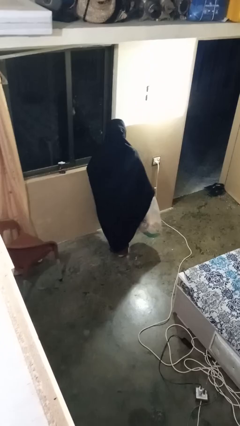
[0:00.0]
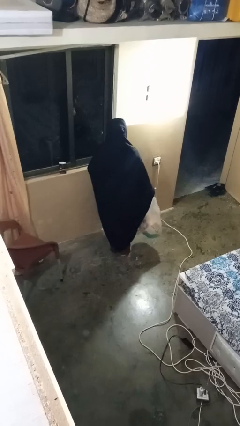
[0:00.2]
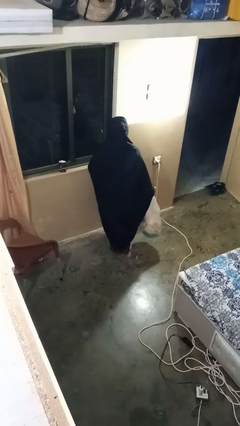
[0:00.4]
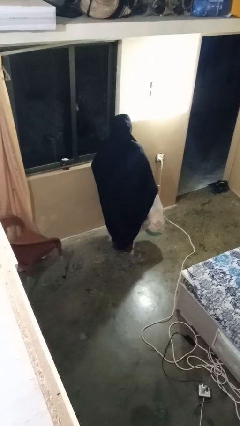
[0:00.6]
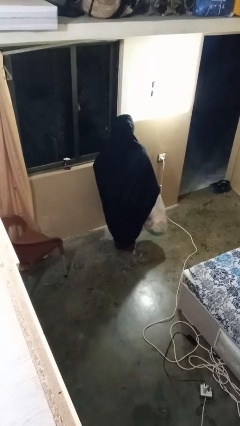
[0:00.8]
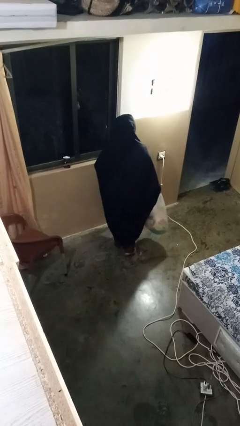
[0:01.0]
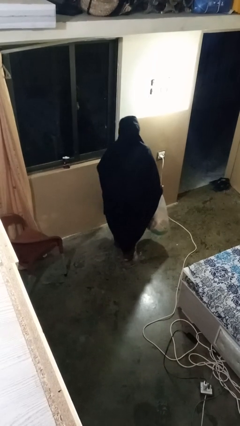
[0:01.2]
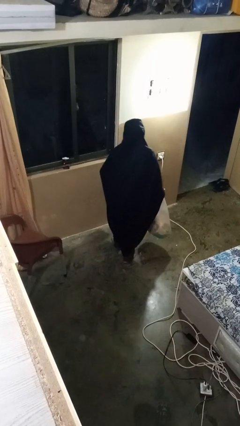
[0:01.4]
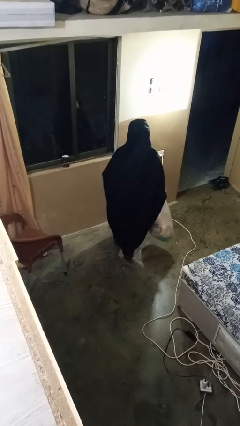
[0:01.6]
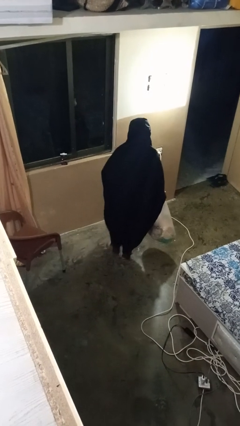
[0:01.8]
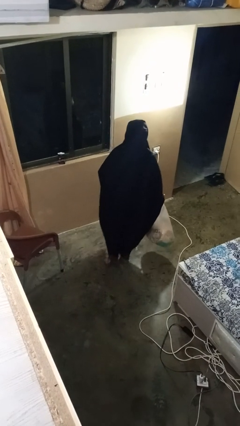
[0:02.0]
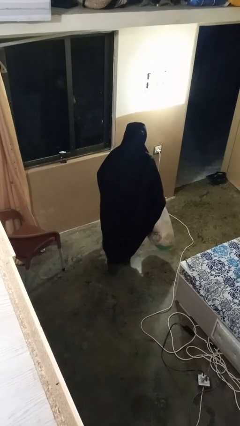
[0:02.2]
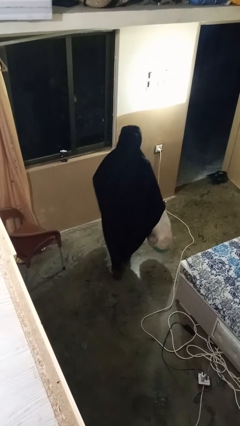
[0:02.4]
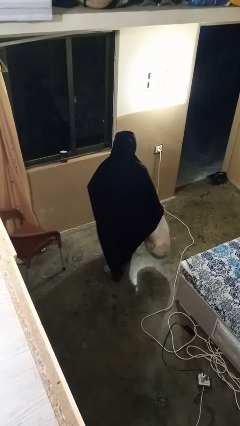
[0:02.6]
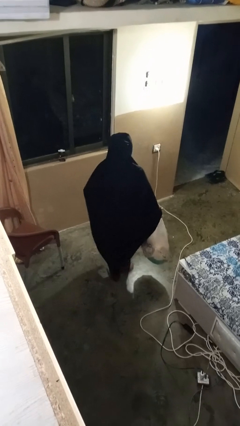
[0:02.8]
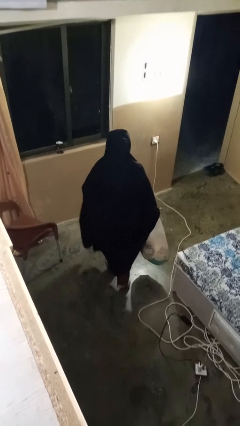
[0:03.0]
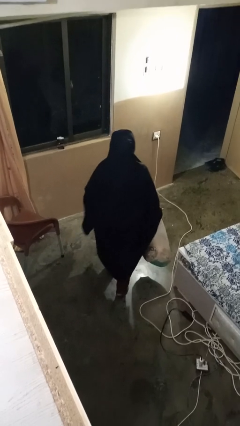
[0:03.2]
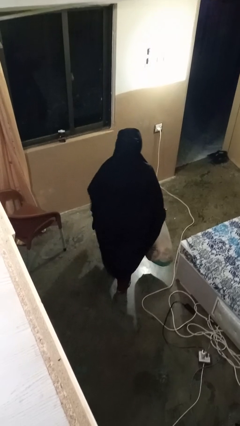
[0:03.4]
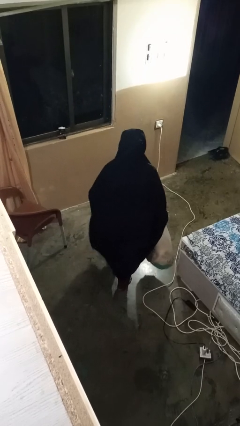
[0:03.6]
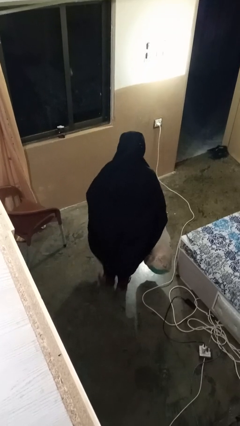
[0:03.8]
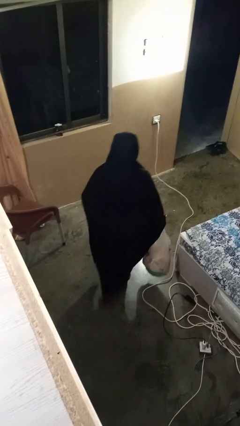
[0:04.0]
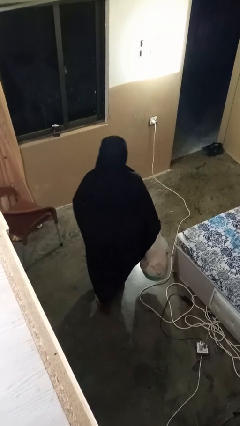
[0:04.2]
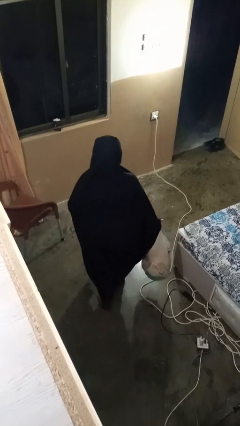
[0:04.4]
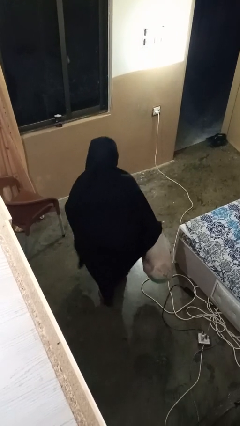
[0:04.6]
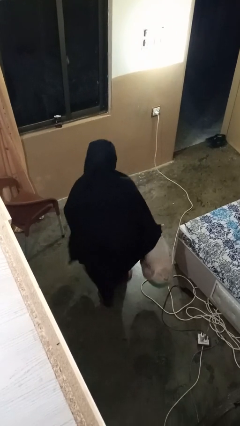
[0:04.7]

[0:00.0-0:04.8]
person carries groceries

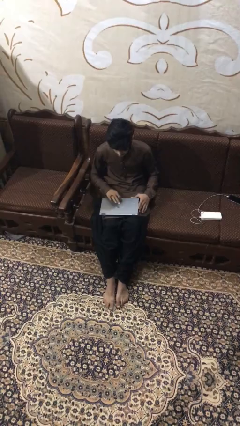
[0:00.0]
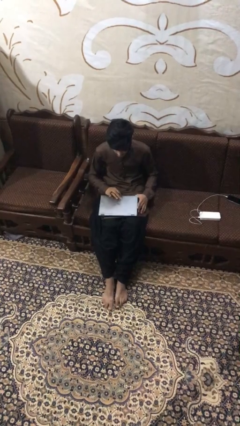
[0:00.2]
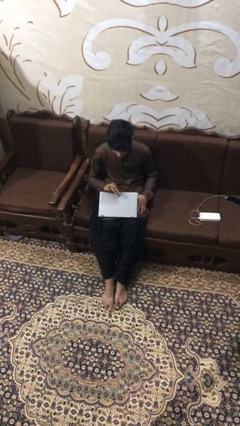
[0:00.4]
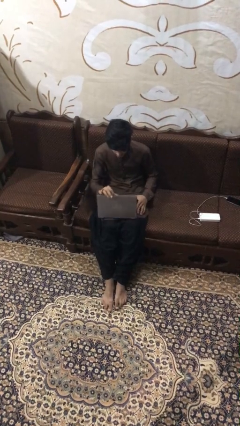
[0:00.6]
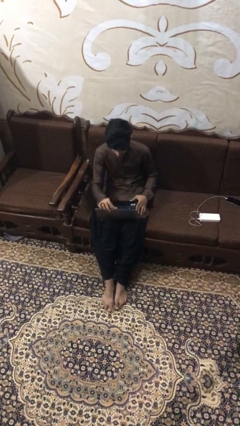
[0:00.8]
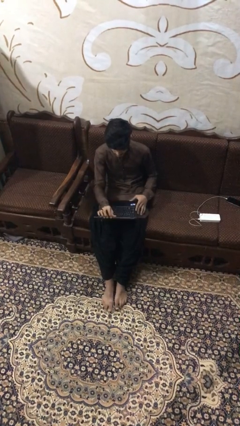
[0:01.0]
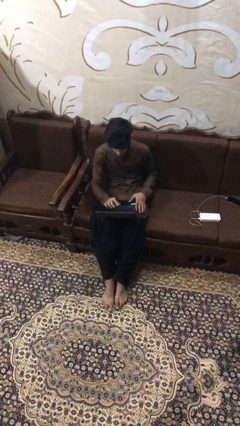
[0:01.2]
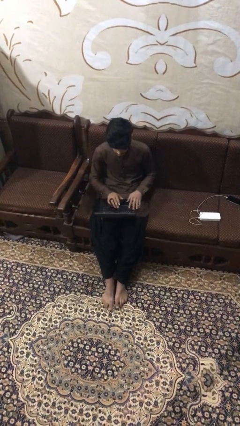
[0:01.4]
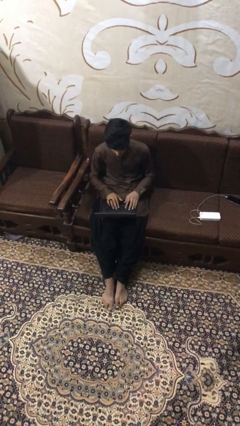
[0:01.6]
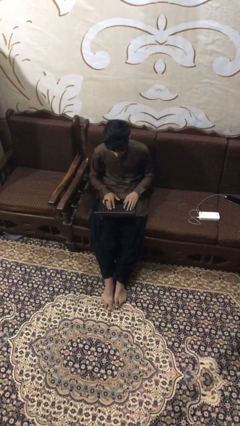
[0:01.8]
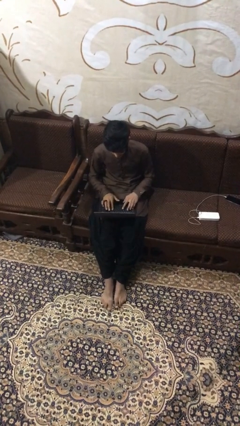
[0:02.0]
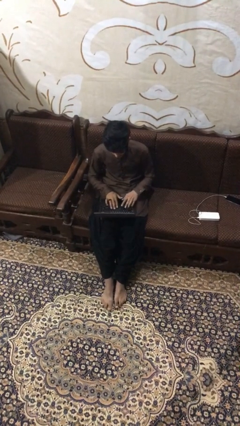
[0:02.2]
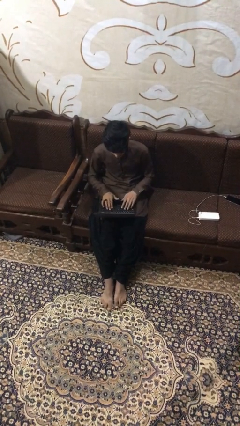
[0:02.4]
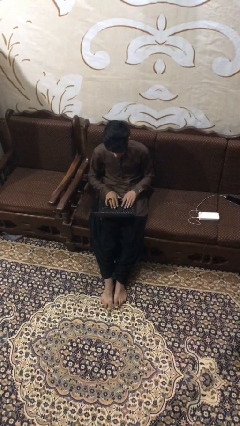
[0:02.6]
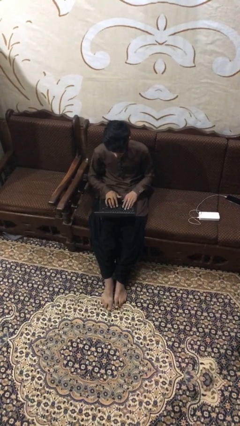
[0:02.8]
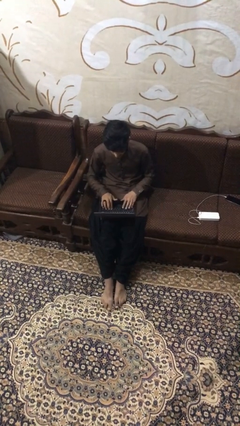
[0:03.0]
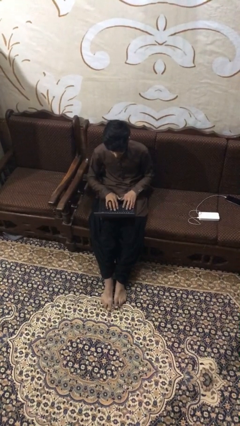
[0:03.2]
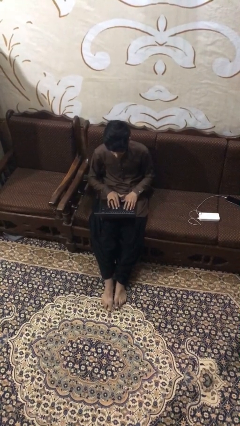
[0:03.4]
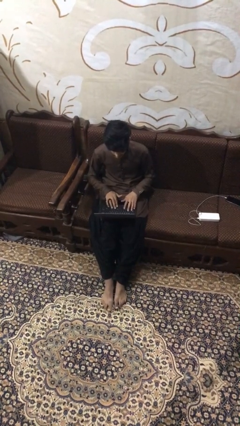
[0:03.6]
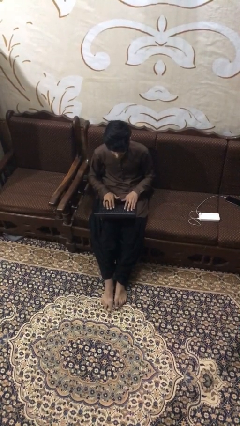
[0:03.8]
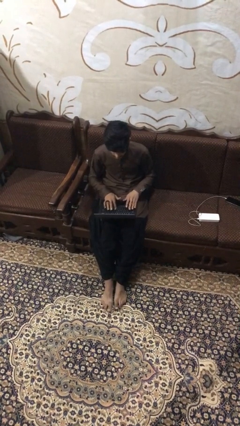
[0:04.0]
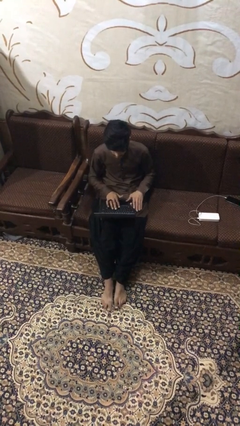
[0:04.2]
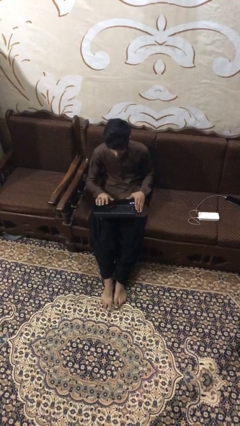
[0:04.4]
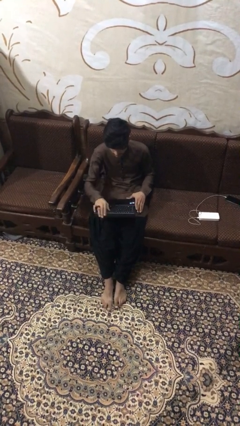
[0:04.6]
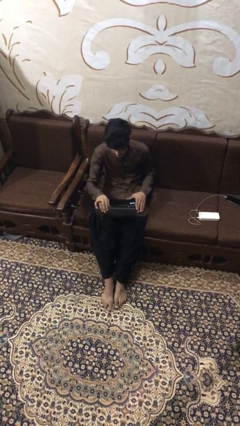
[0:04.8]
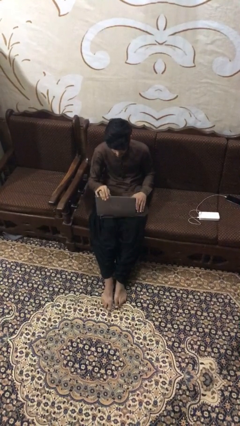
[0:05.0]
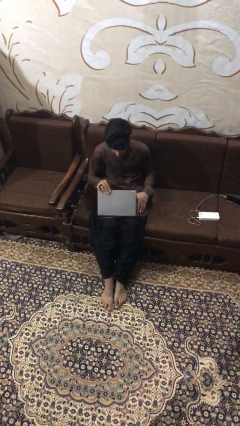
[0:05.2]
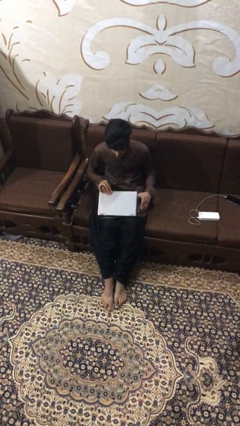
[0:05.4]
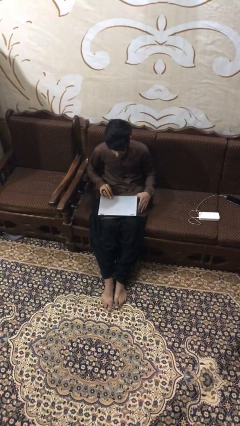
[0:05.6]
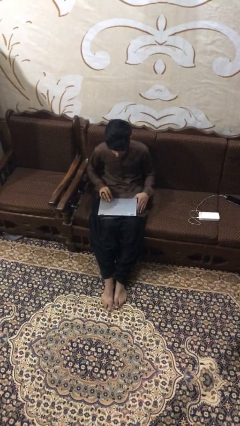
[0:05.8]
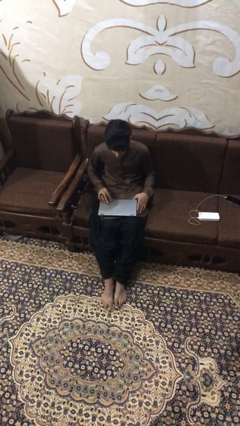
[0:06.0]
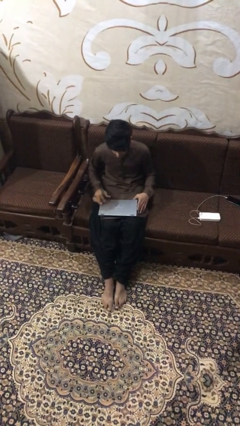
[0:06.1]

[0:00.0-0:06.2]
person interacts with laptop

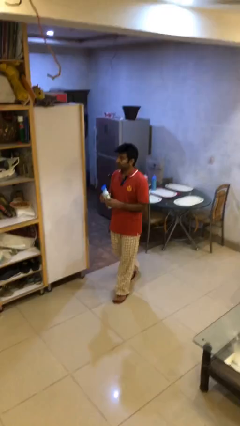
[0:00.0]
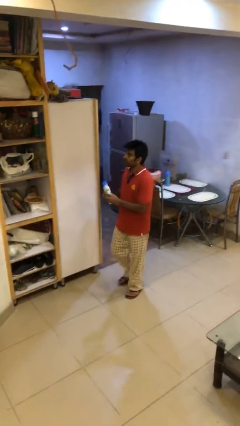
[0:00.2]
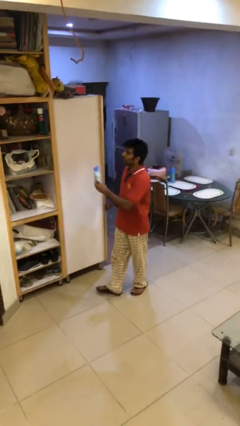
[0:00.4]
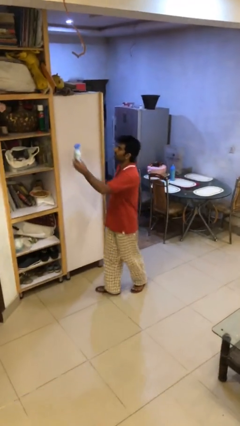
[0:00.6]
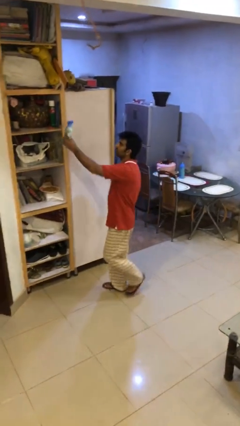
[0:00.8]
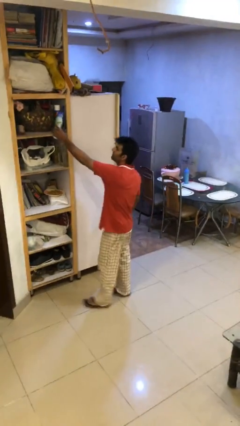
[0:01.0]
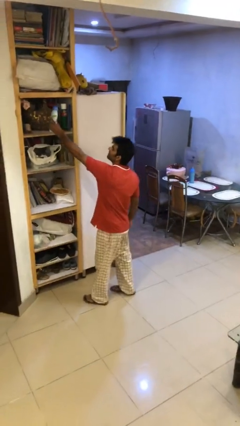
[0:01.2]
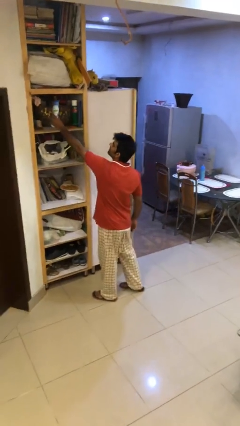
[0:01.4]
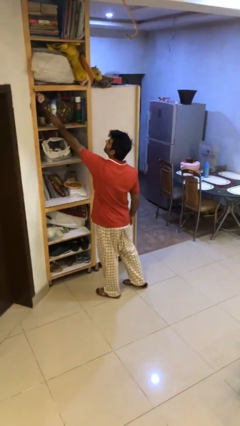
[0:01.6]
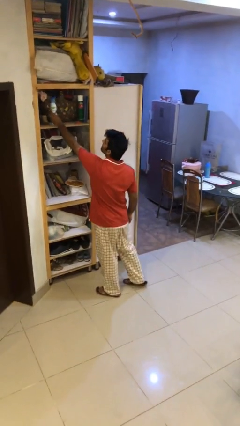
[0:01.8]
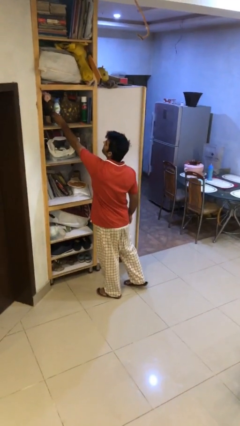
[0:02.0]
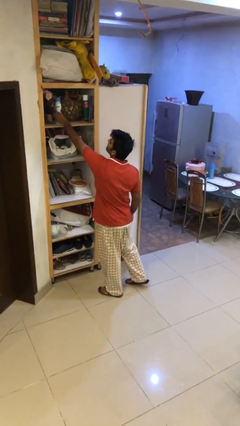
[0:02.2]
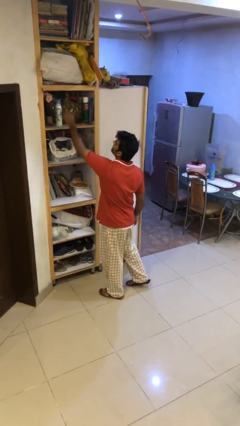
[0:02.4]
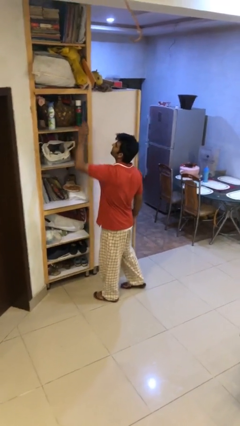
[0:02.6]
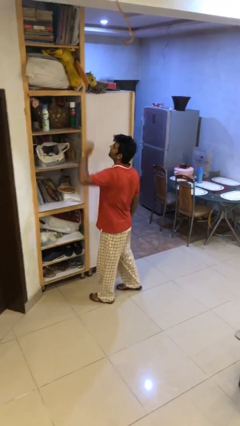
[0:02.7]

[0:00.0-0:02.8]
person puts down object on shelf

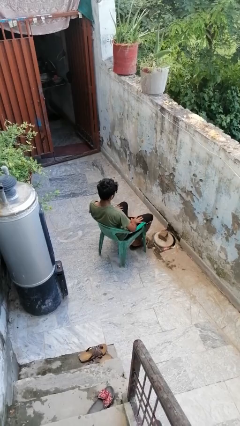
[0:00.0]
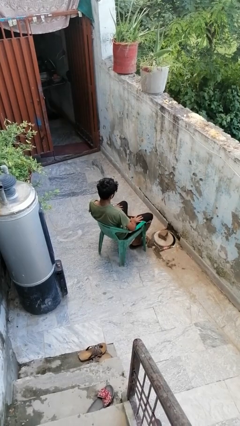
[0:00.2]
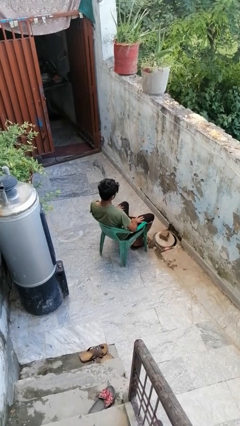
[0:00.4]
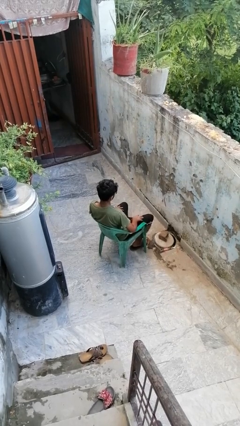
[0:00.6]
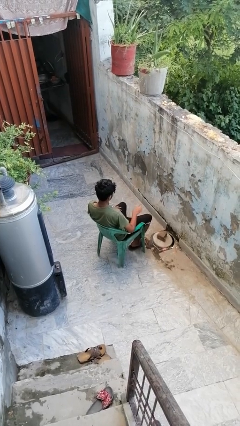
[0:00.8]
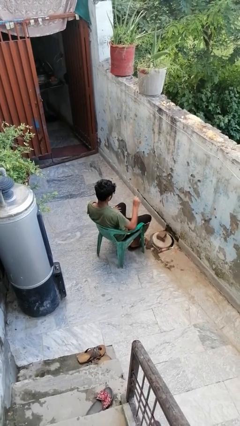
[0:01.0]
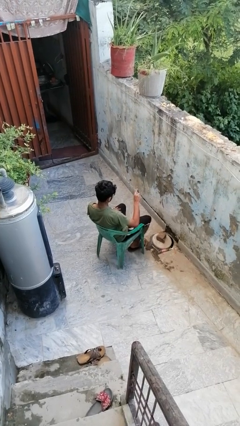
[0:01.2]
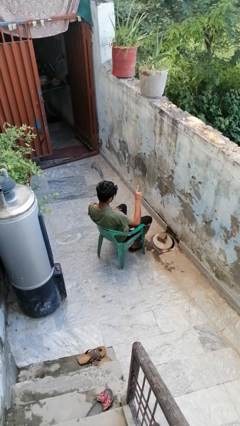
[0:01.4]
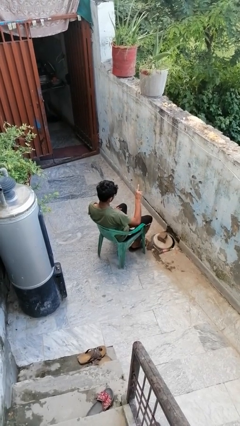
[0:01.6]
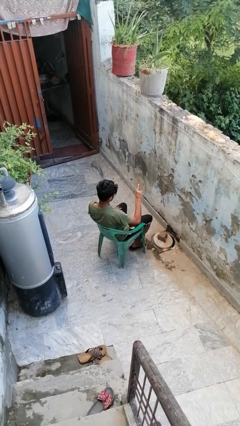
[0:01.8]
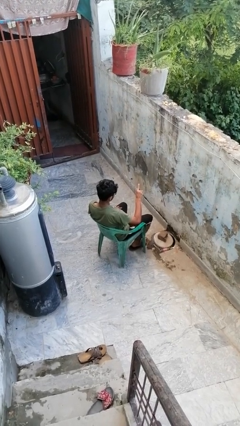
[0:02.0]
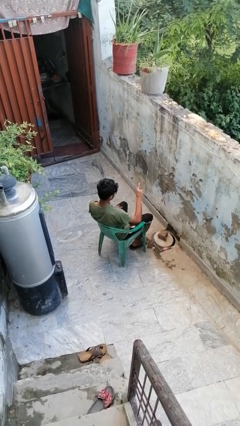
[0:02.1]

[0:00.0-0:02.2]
person gestures number one

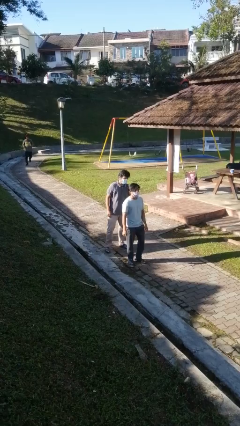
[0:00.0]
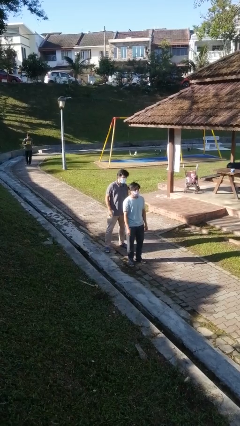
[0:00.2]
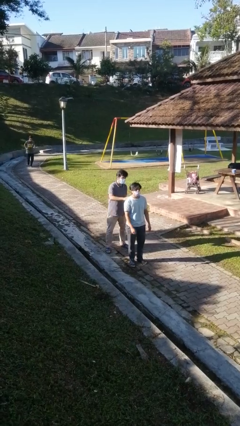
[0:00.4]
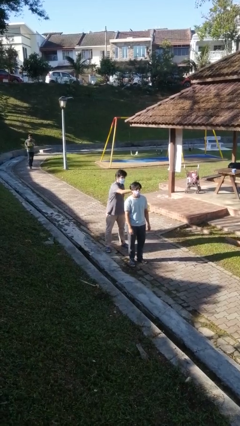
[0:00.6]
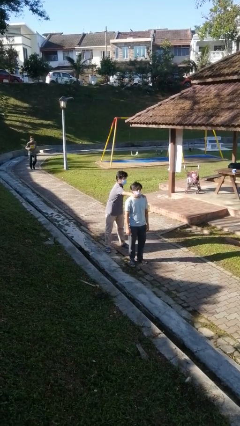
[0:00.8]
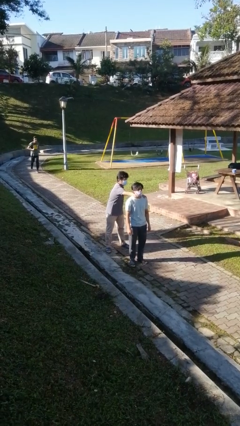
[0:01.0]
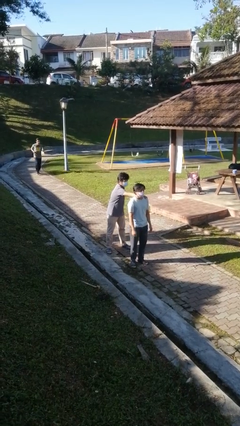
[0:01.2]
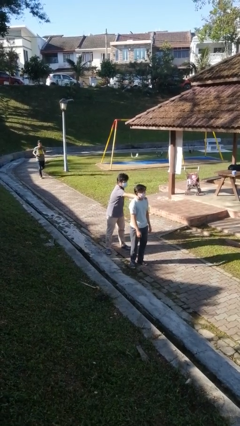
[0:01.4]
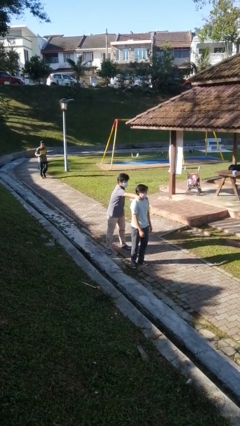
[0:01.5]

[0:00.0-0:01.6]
person grabs person by shoulder
